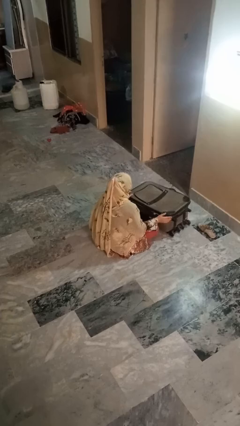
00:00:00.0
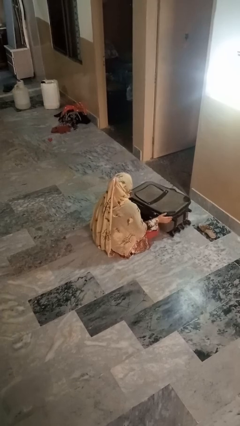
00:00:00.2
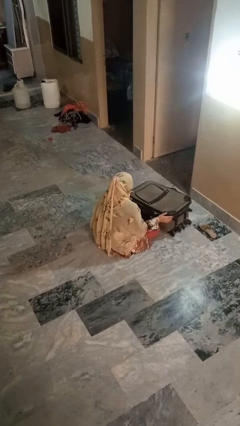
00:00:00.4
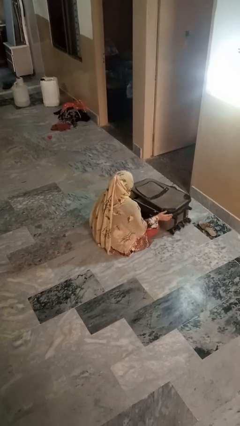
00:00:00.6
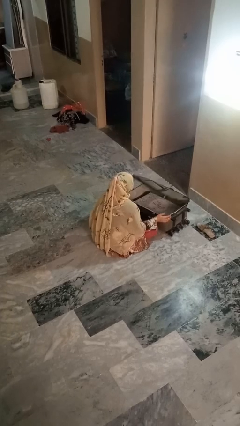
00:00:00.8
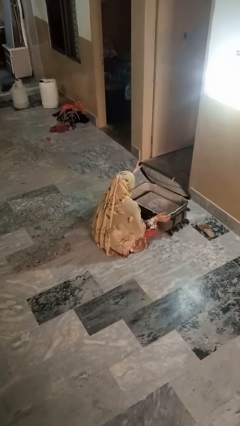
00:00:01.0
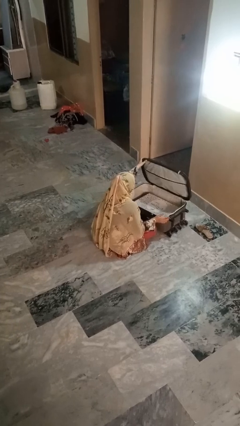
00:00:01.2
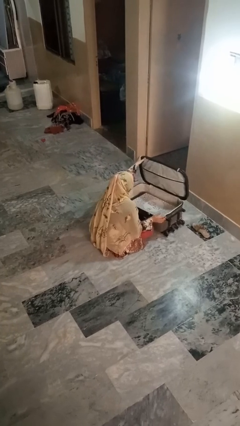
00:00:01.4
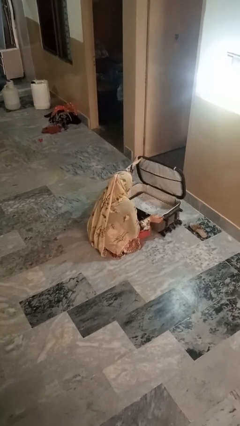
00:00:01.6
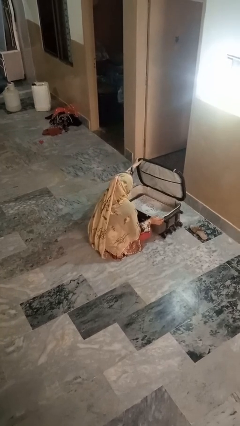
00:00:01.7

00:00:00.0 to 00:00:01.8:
person opens suitcase

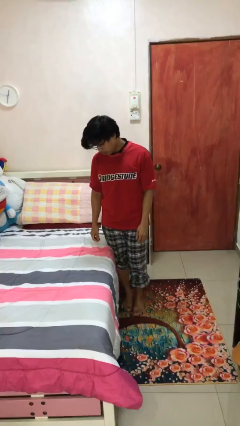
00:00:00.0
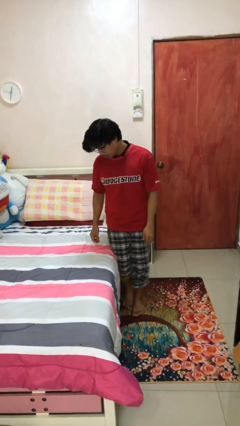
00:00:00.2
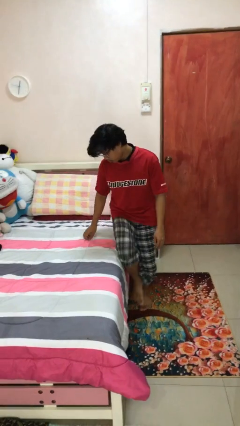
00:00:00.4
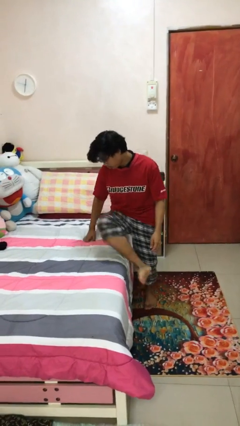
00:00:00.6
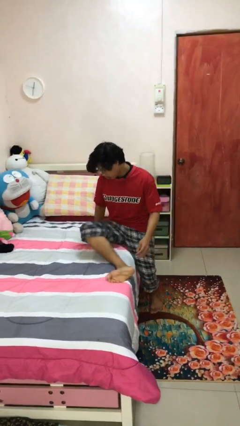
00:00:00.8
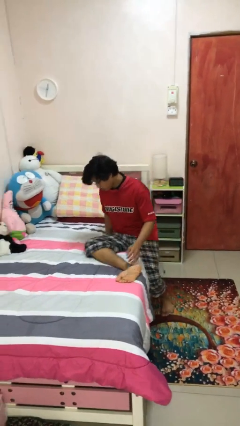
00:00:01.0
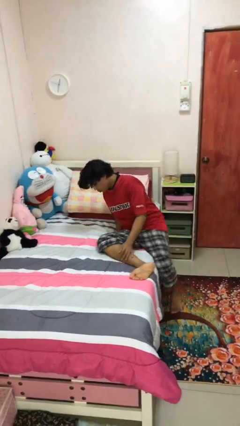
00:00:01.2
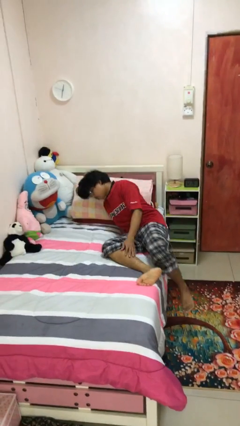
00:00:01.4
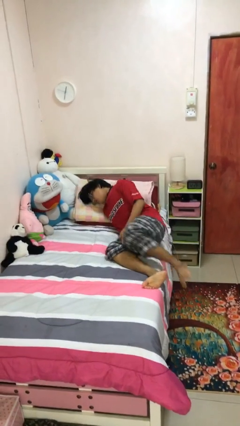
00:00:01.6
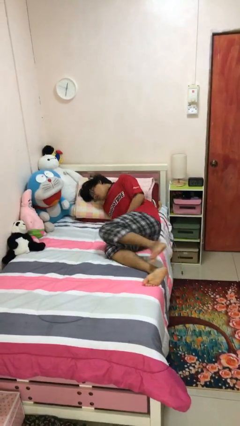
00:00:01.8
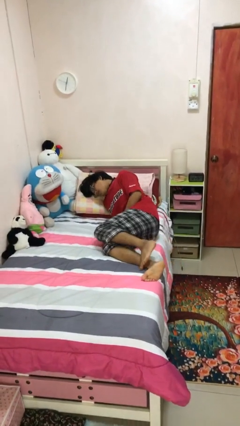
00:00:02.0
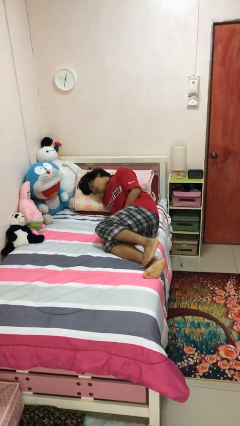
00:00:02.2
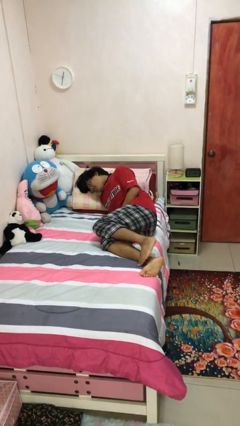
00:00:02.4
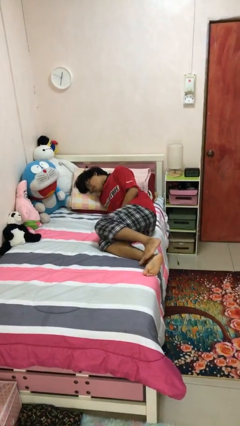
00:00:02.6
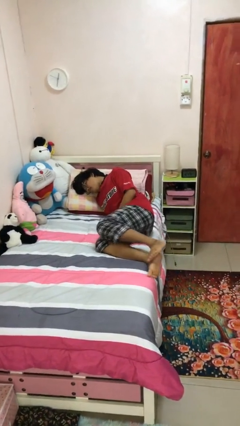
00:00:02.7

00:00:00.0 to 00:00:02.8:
person lies down on bed

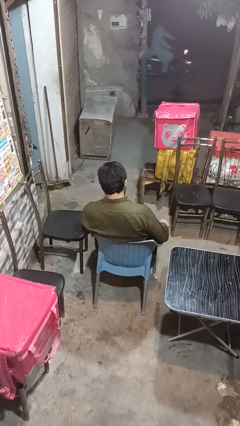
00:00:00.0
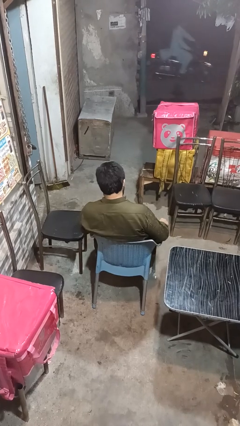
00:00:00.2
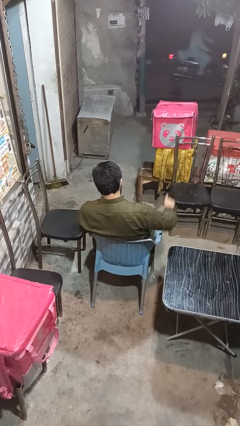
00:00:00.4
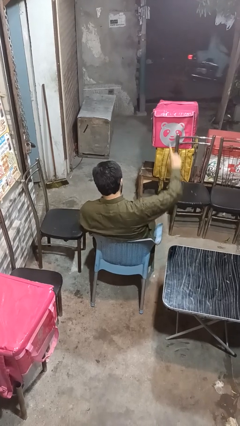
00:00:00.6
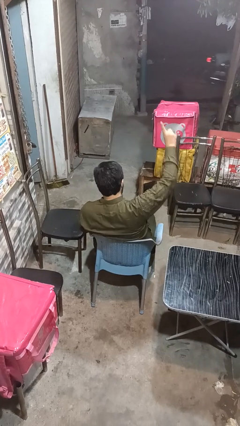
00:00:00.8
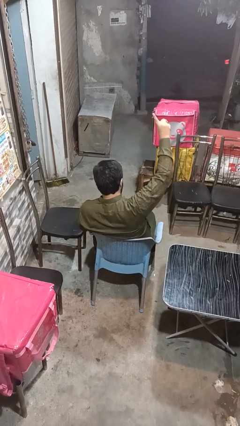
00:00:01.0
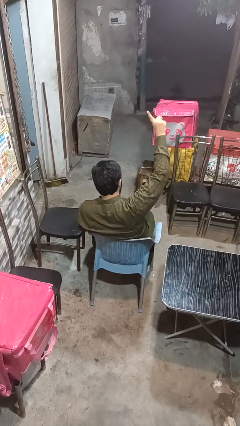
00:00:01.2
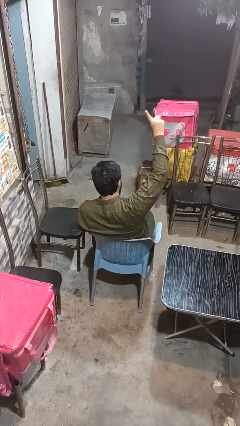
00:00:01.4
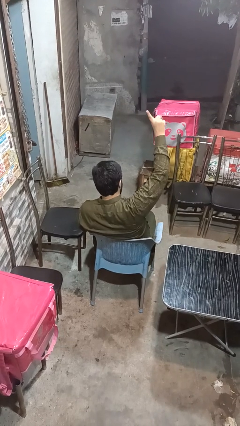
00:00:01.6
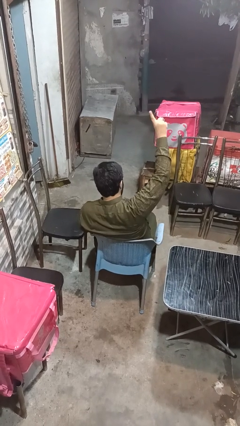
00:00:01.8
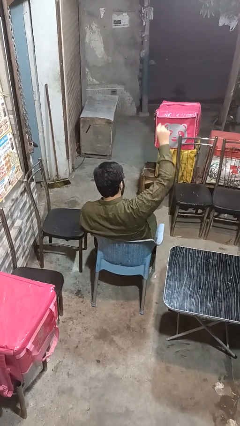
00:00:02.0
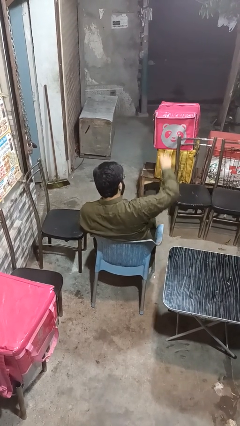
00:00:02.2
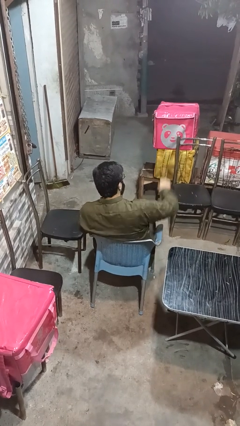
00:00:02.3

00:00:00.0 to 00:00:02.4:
person gestures number one

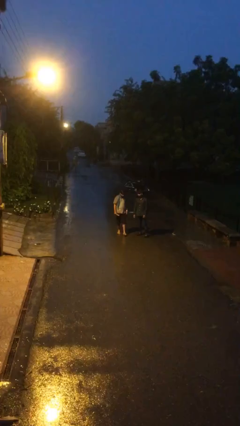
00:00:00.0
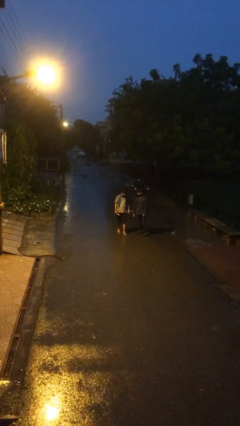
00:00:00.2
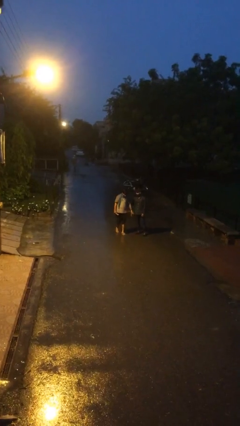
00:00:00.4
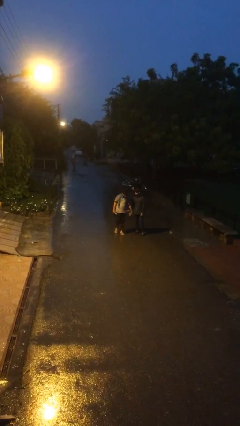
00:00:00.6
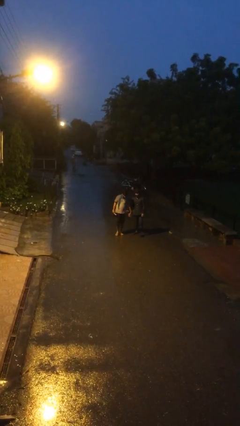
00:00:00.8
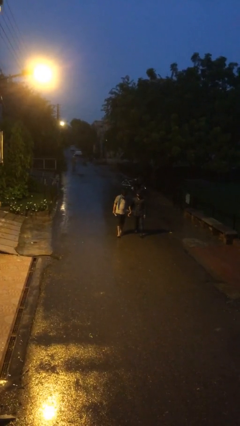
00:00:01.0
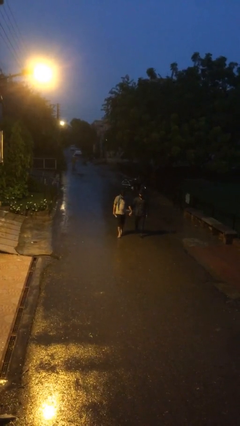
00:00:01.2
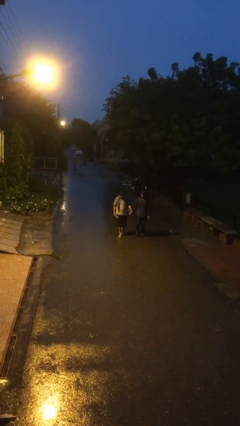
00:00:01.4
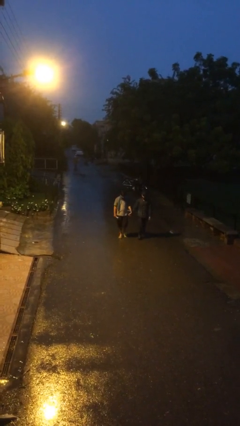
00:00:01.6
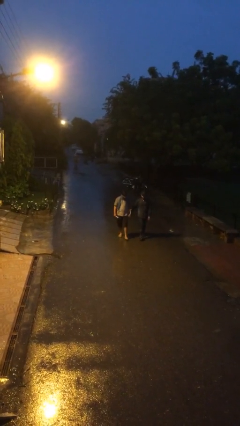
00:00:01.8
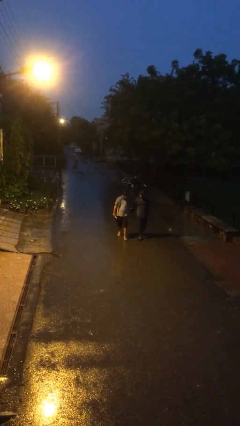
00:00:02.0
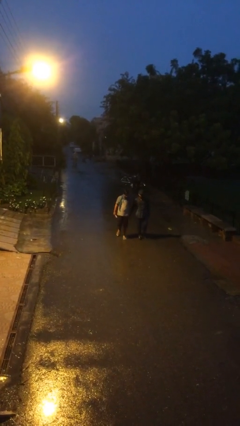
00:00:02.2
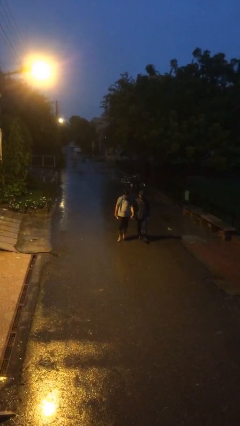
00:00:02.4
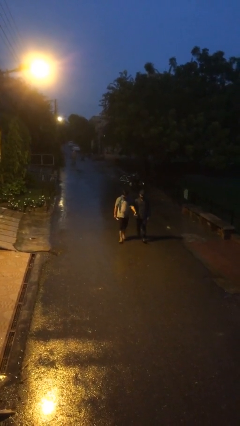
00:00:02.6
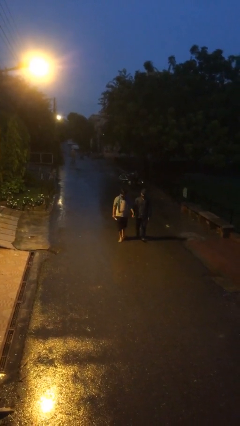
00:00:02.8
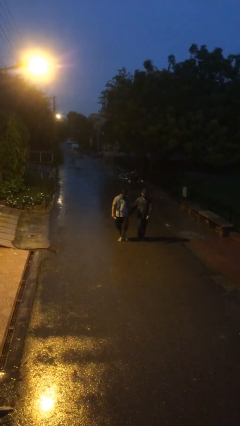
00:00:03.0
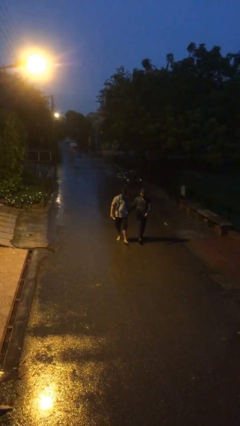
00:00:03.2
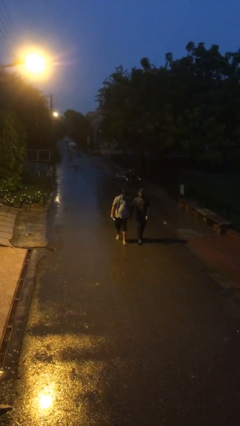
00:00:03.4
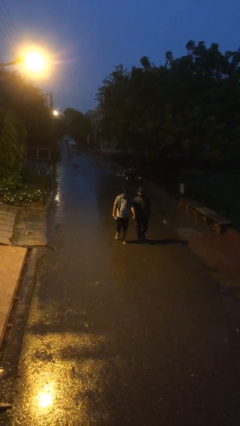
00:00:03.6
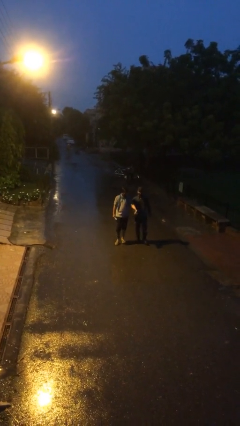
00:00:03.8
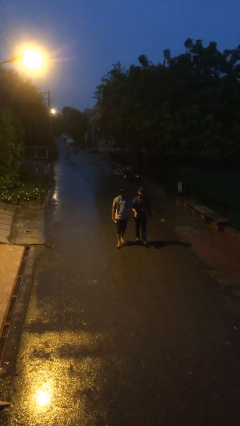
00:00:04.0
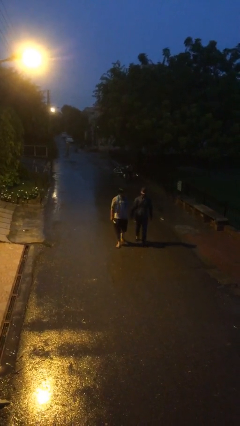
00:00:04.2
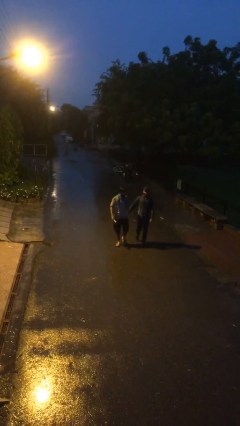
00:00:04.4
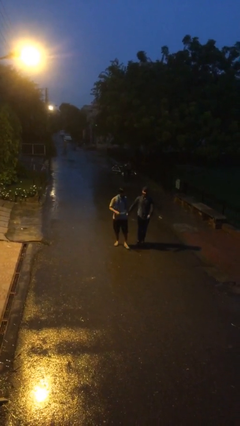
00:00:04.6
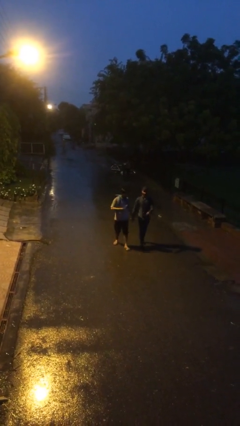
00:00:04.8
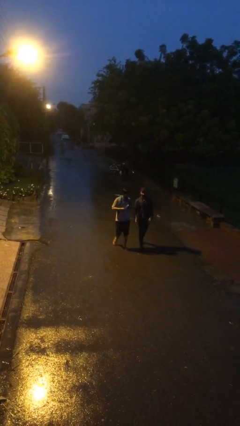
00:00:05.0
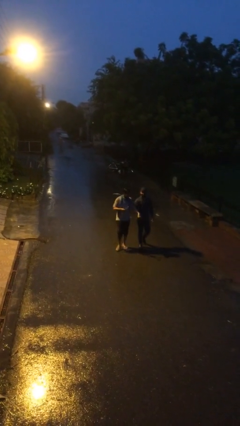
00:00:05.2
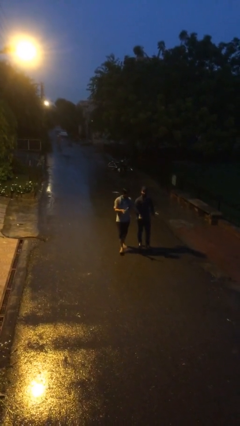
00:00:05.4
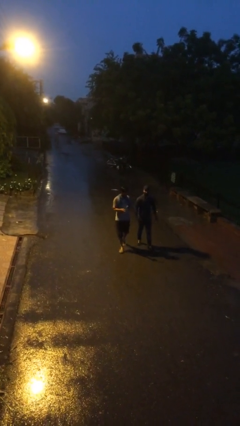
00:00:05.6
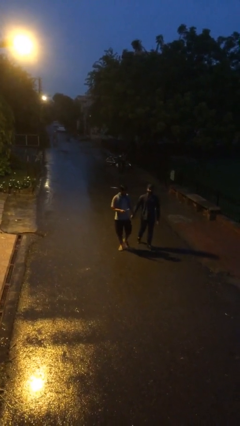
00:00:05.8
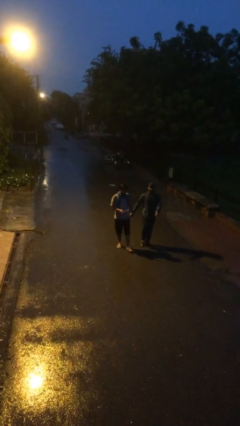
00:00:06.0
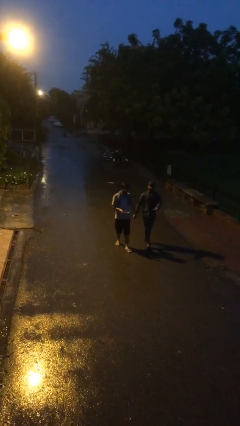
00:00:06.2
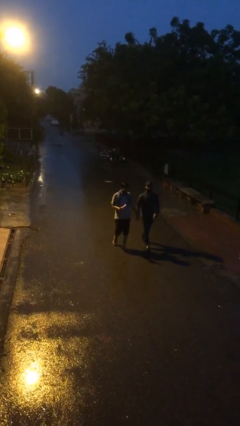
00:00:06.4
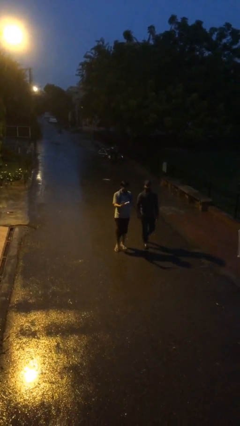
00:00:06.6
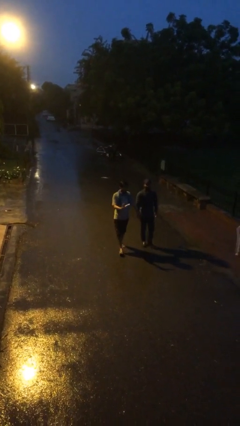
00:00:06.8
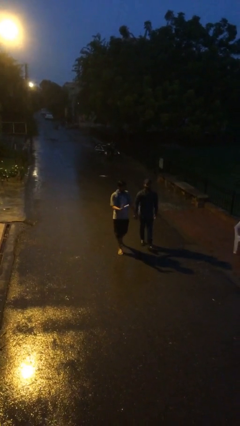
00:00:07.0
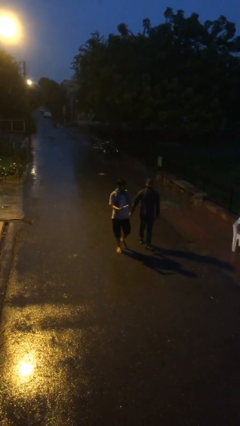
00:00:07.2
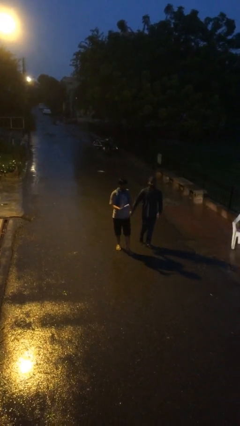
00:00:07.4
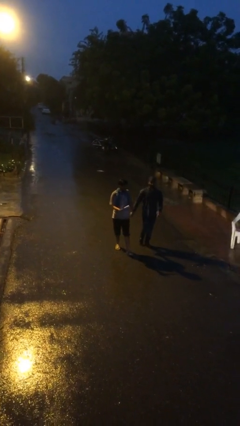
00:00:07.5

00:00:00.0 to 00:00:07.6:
person holds hand

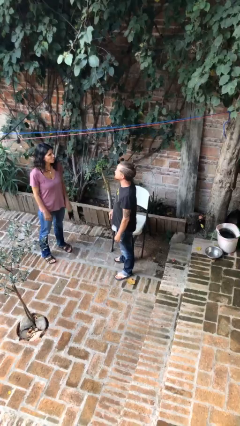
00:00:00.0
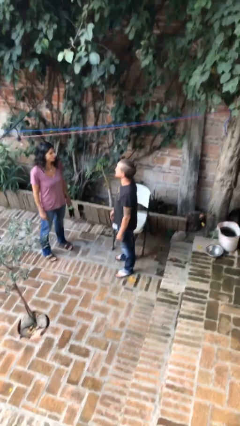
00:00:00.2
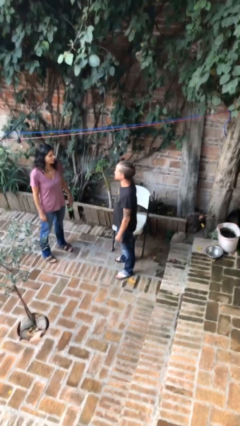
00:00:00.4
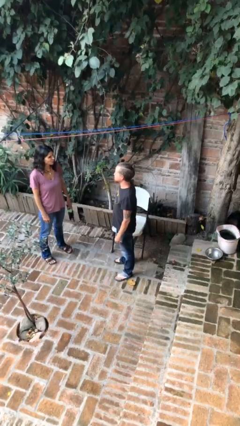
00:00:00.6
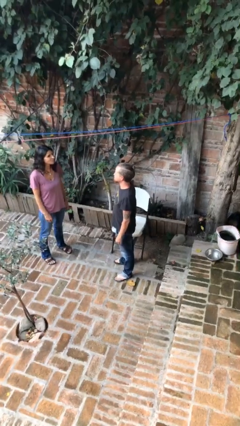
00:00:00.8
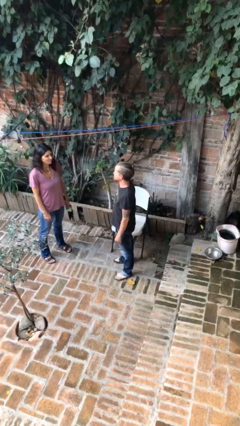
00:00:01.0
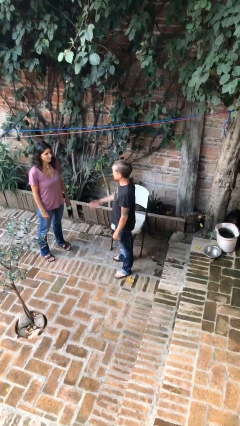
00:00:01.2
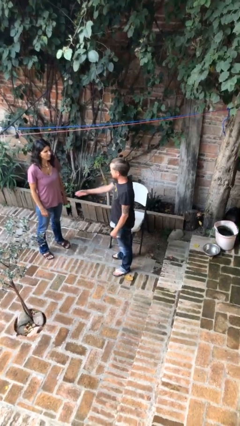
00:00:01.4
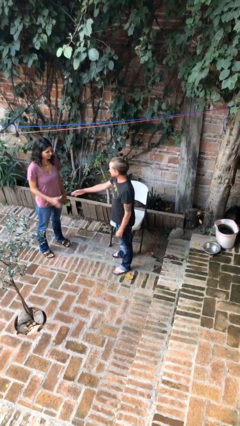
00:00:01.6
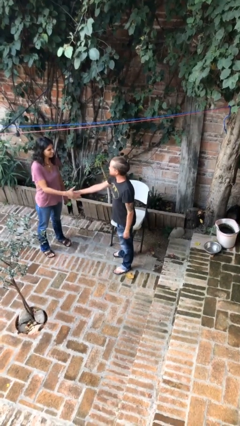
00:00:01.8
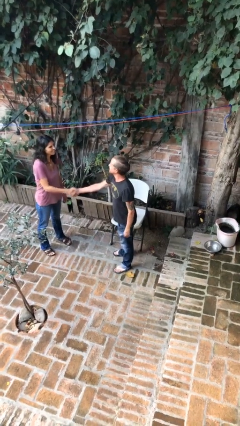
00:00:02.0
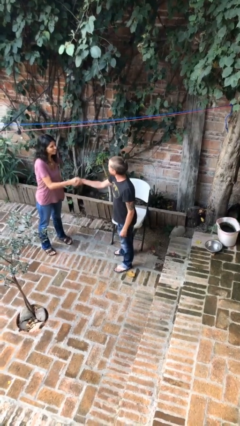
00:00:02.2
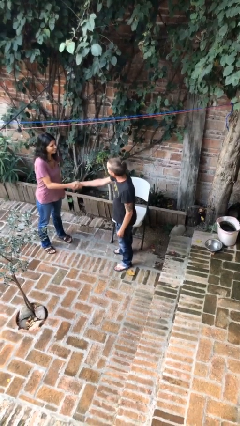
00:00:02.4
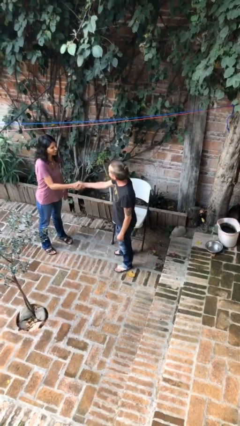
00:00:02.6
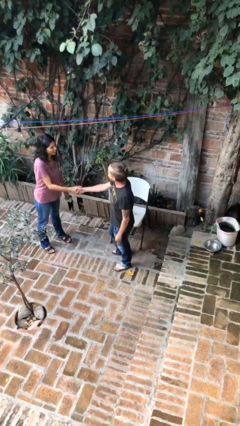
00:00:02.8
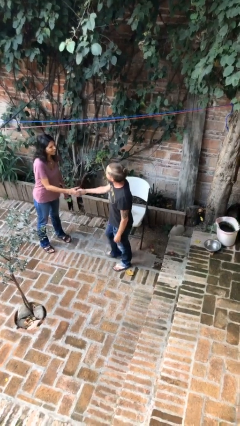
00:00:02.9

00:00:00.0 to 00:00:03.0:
person shakes hand
